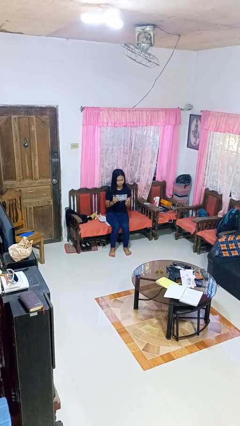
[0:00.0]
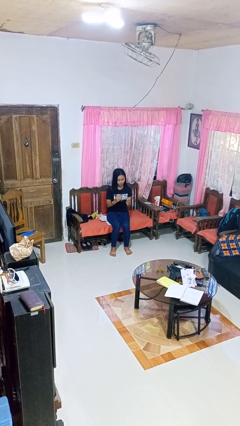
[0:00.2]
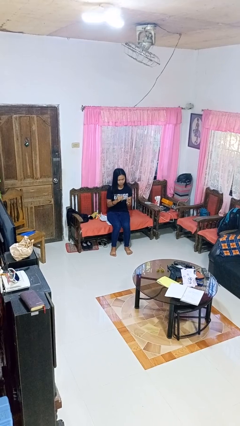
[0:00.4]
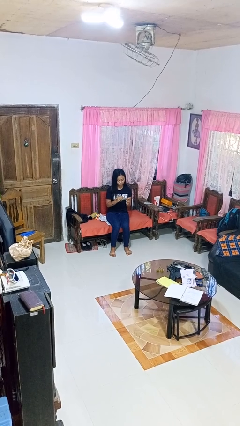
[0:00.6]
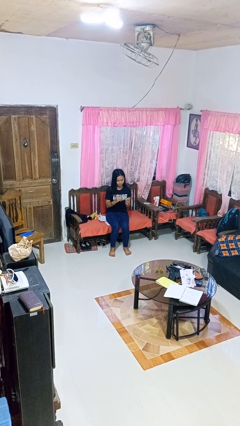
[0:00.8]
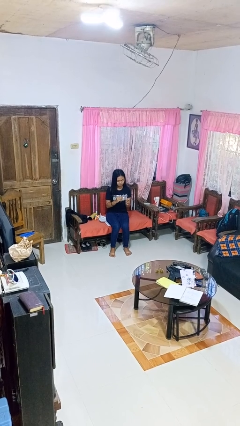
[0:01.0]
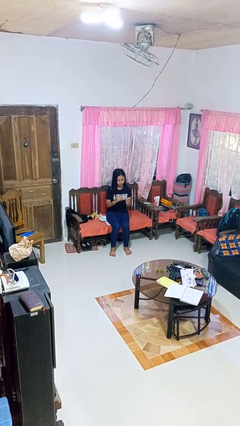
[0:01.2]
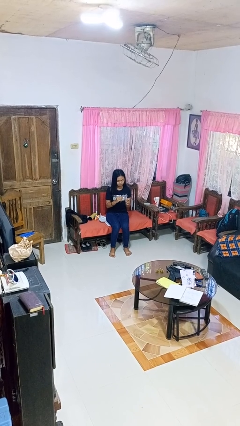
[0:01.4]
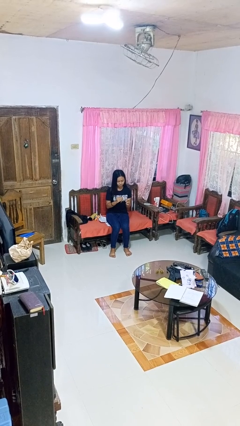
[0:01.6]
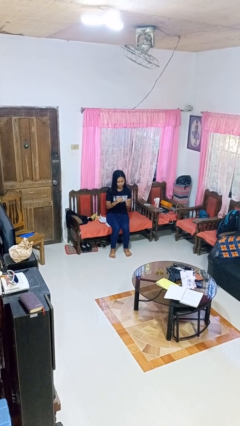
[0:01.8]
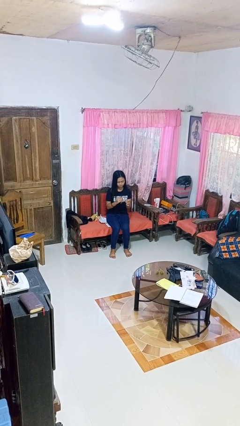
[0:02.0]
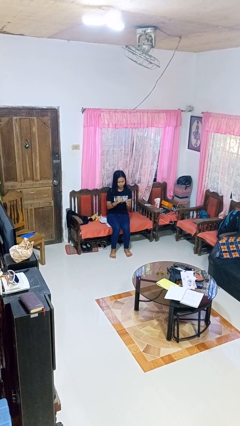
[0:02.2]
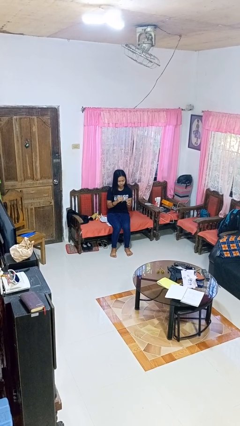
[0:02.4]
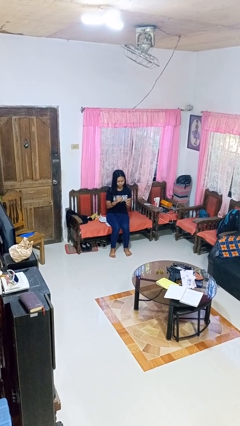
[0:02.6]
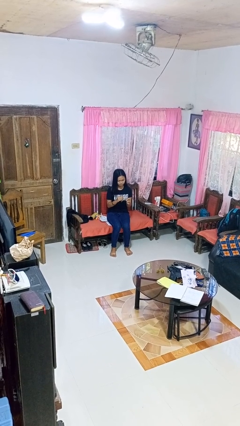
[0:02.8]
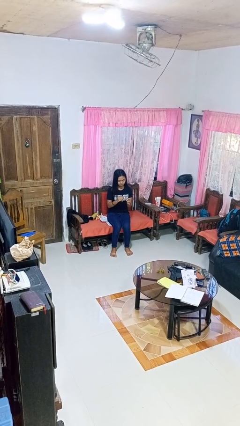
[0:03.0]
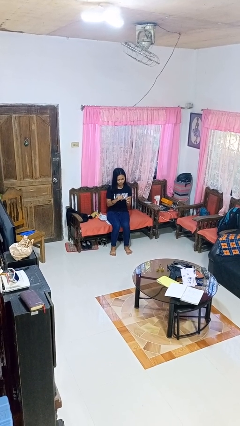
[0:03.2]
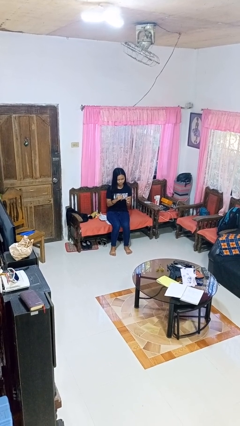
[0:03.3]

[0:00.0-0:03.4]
person clips fingernails

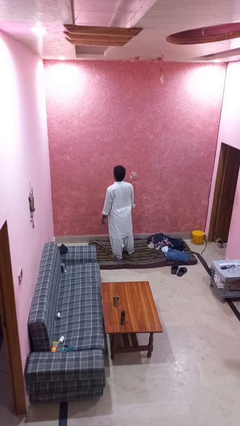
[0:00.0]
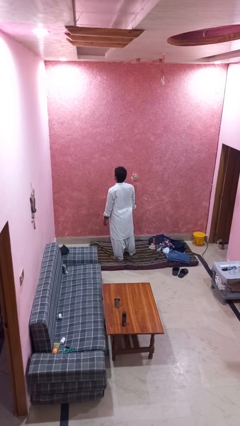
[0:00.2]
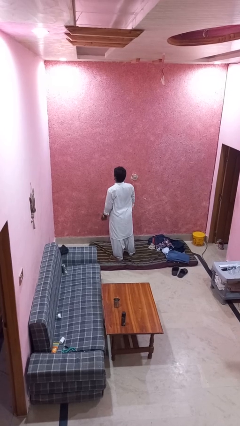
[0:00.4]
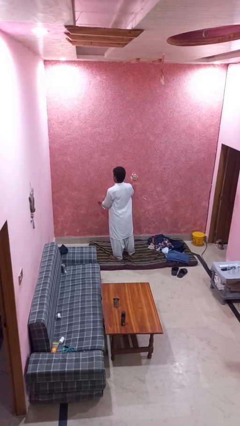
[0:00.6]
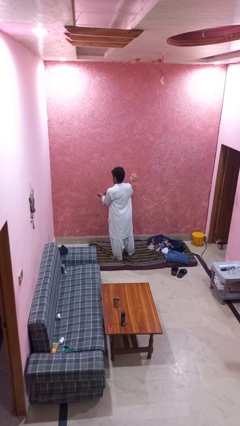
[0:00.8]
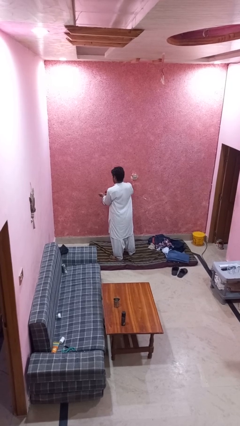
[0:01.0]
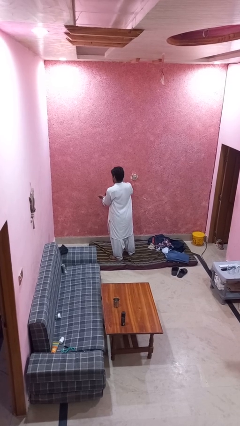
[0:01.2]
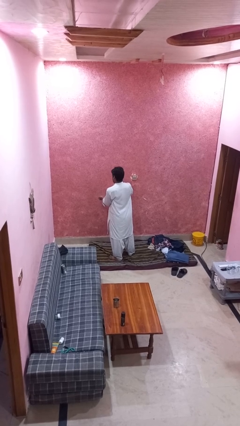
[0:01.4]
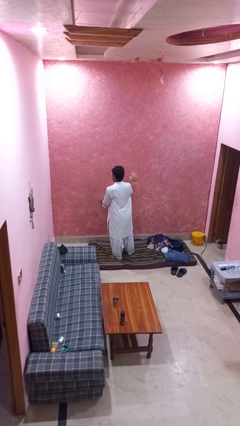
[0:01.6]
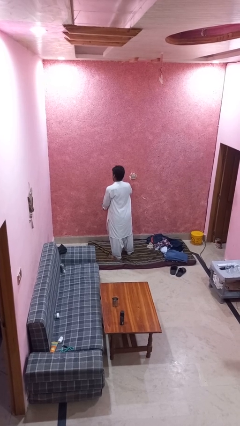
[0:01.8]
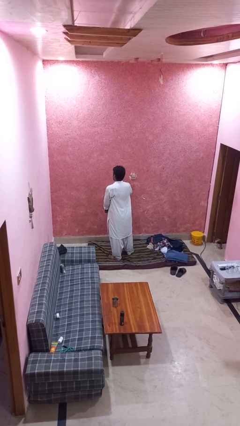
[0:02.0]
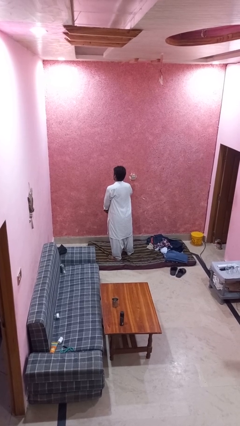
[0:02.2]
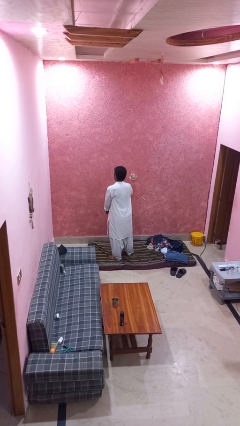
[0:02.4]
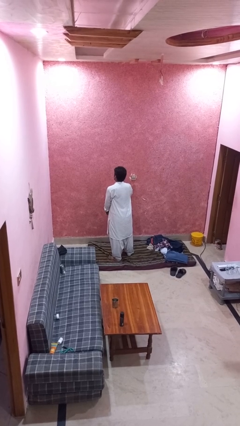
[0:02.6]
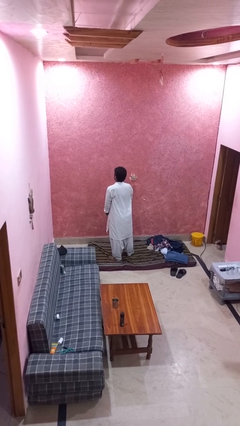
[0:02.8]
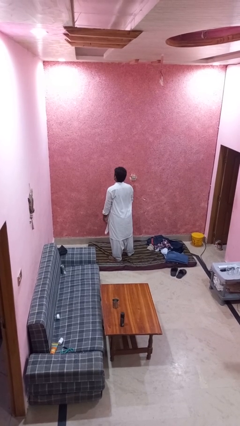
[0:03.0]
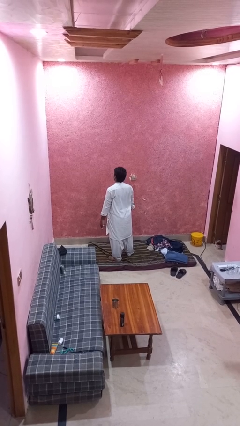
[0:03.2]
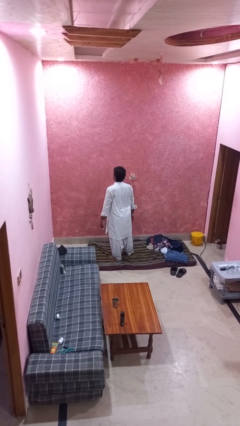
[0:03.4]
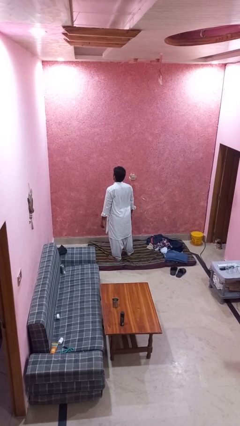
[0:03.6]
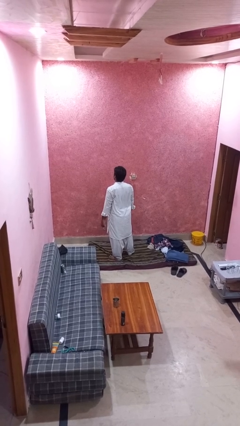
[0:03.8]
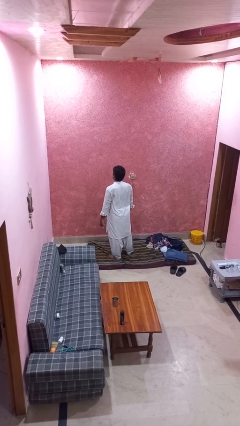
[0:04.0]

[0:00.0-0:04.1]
person takes off wristwatch

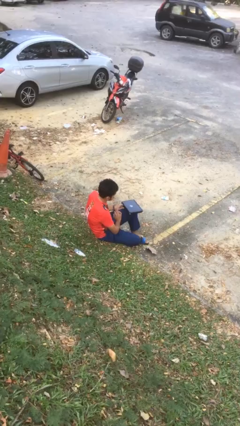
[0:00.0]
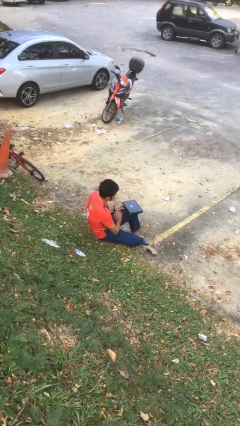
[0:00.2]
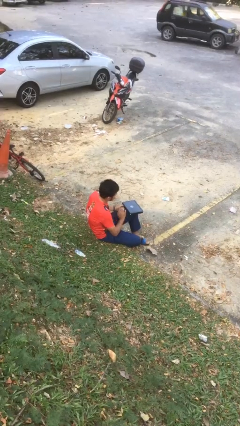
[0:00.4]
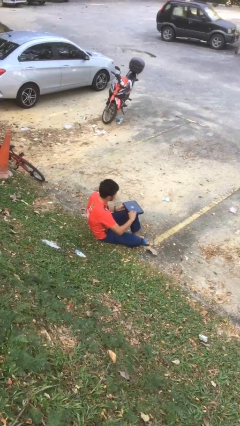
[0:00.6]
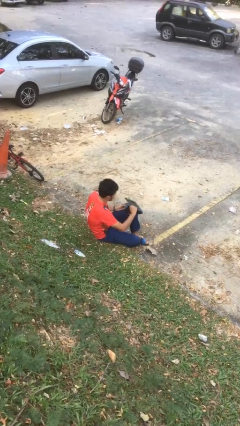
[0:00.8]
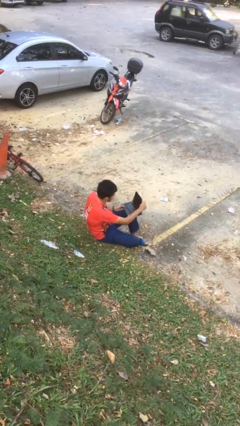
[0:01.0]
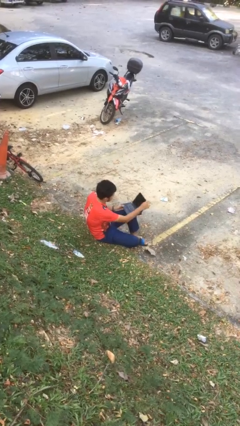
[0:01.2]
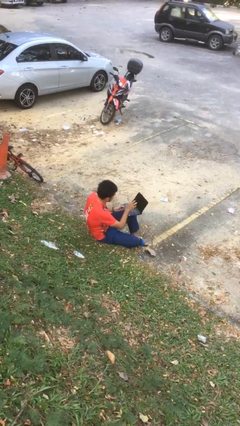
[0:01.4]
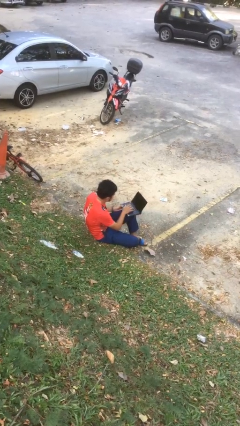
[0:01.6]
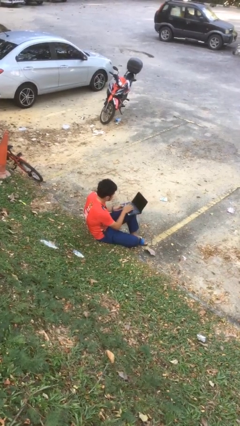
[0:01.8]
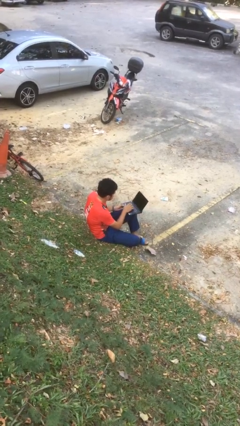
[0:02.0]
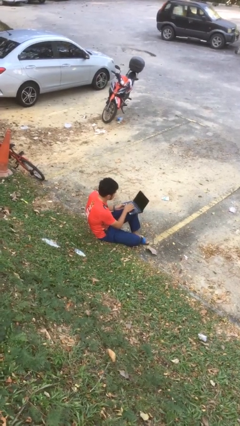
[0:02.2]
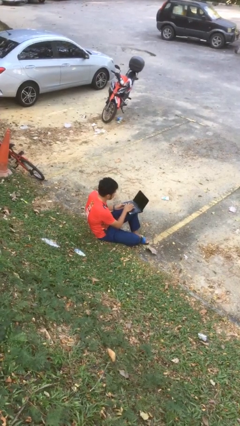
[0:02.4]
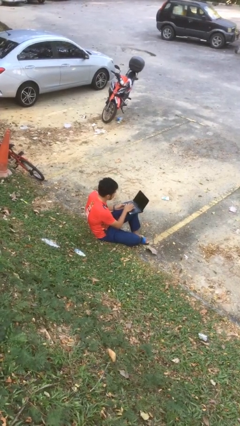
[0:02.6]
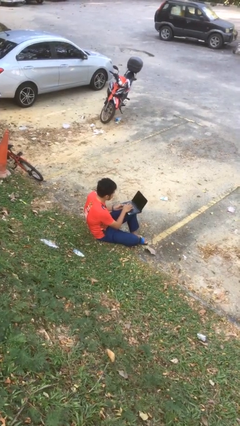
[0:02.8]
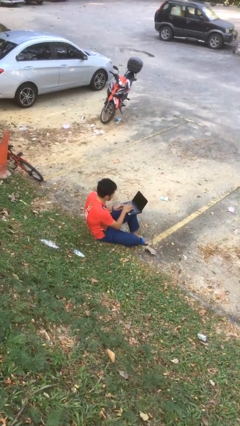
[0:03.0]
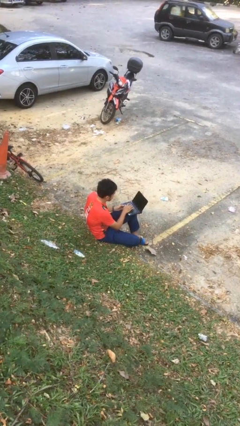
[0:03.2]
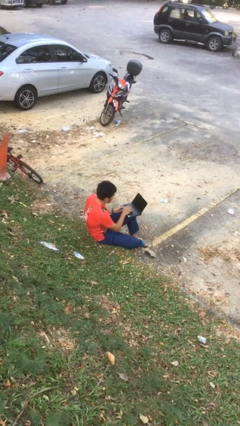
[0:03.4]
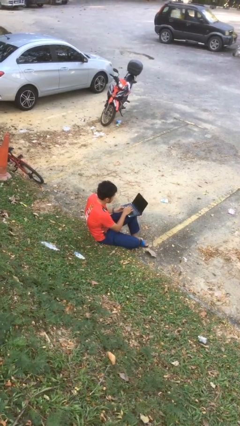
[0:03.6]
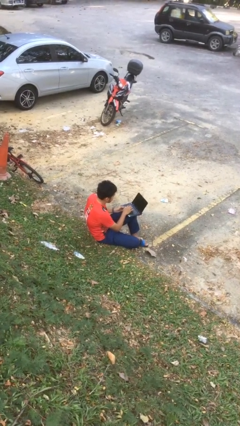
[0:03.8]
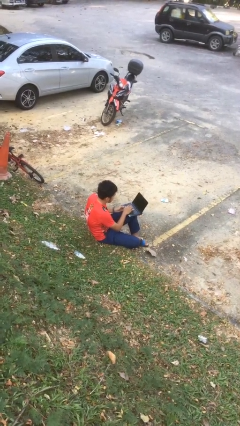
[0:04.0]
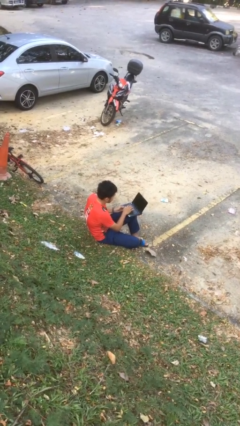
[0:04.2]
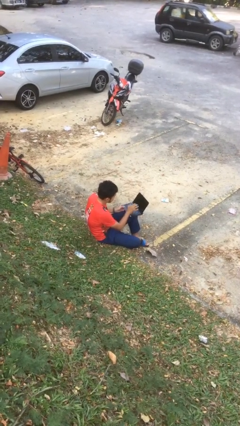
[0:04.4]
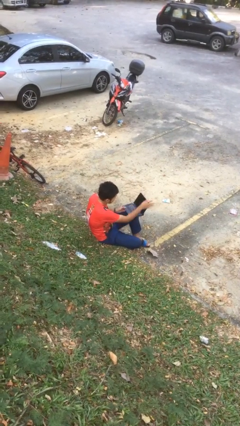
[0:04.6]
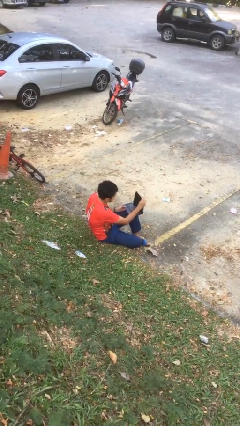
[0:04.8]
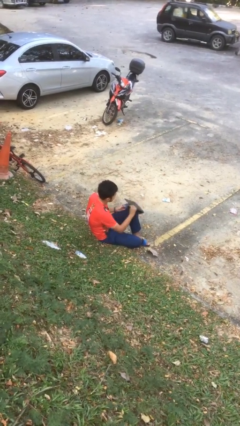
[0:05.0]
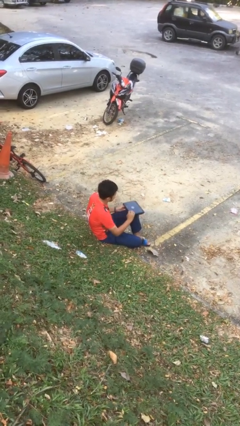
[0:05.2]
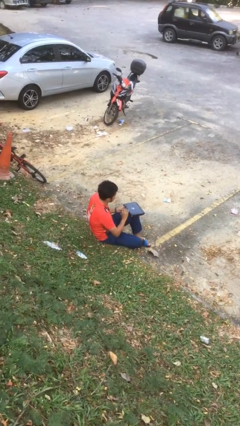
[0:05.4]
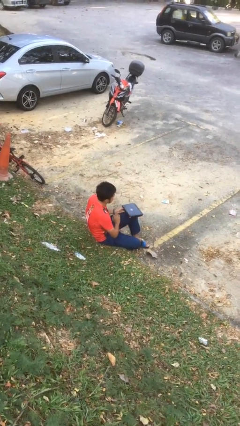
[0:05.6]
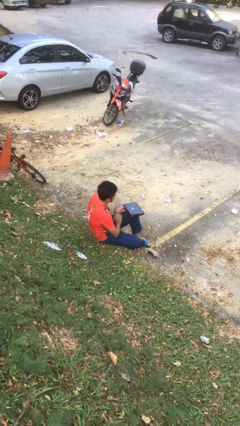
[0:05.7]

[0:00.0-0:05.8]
person interacts with laptop

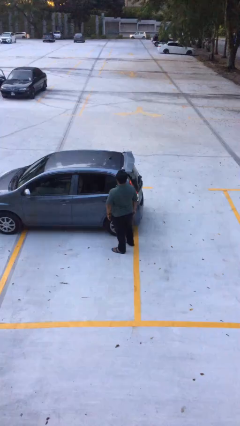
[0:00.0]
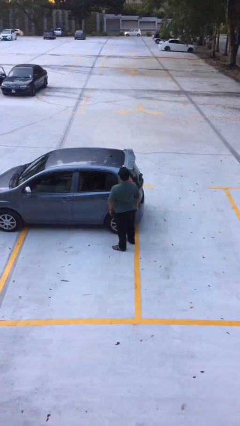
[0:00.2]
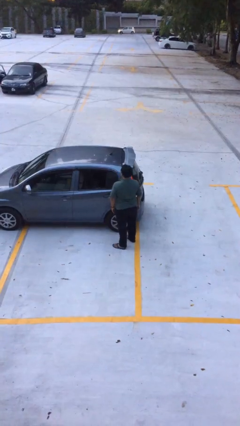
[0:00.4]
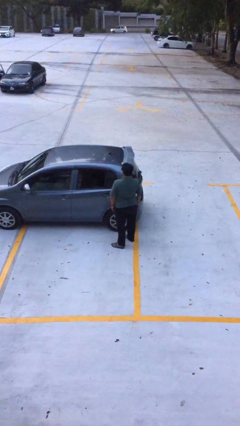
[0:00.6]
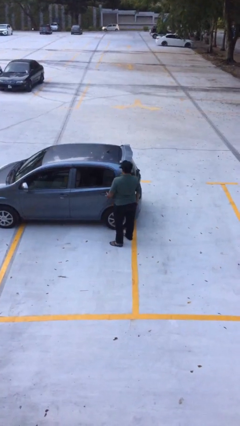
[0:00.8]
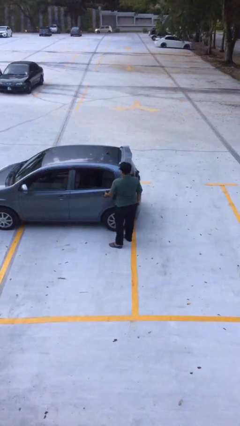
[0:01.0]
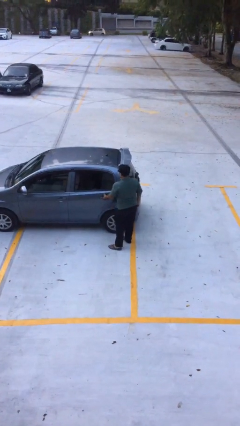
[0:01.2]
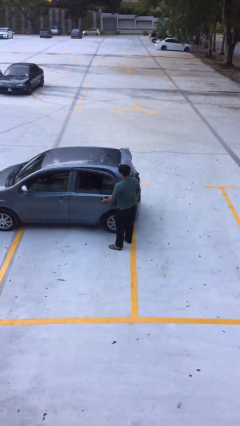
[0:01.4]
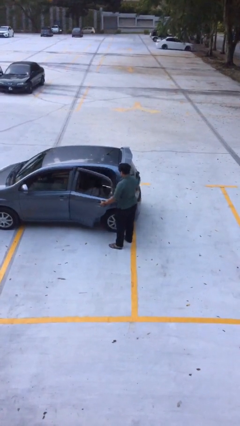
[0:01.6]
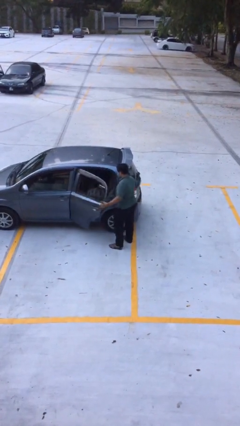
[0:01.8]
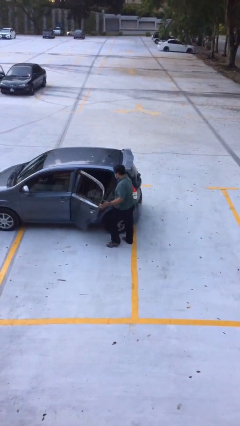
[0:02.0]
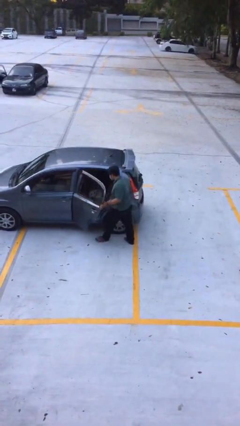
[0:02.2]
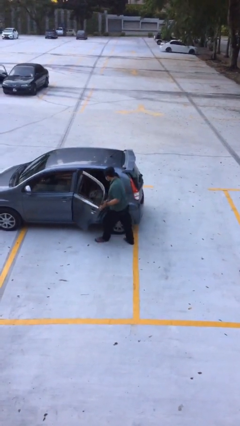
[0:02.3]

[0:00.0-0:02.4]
person opens car door

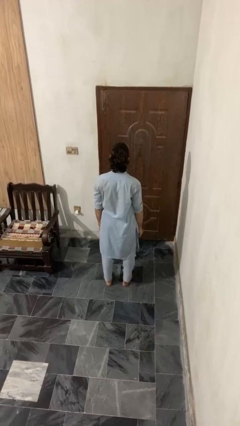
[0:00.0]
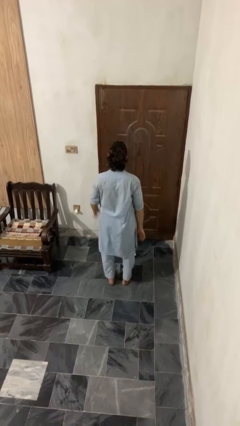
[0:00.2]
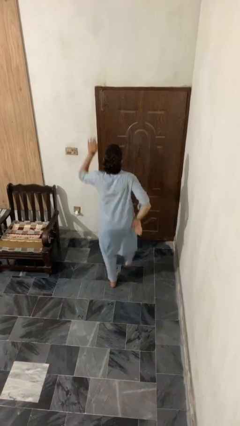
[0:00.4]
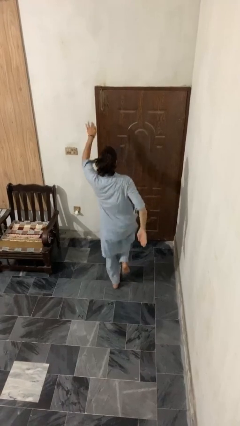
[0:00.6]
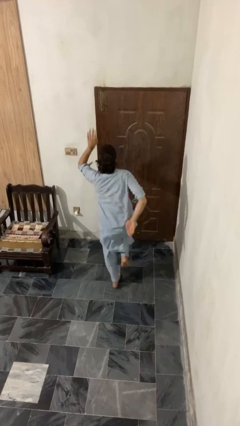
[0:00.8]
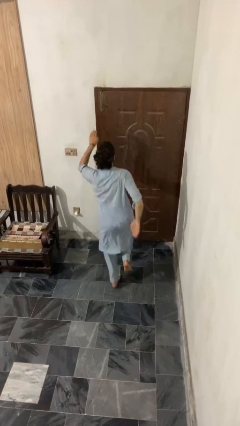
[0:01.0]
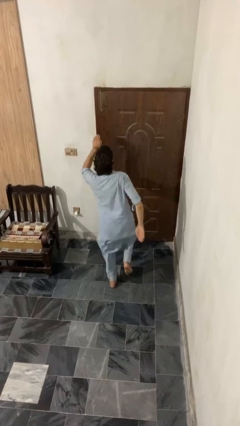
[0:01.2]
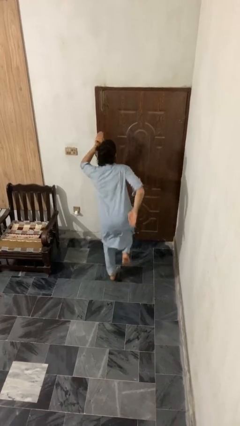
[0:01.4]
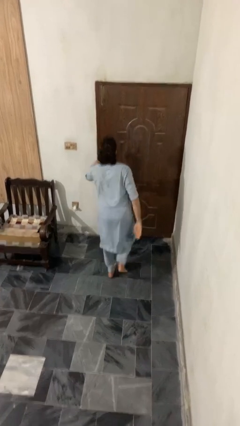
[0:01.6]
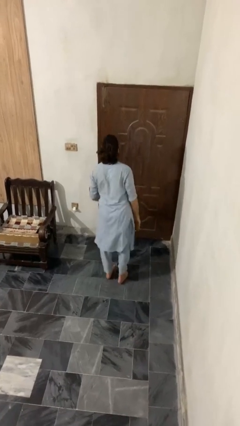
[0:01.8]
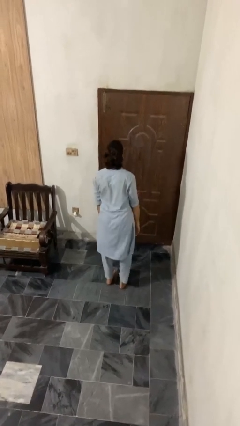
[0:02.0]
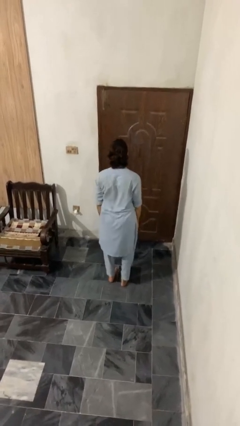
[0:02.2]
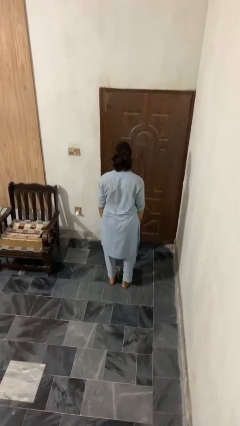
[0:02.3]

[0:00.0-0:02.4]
person dances in place
